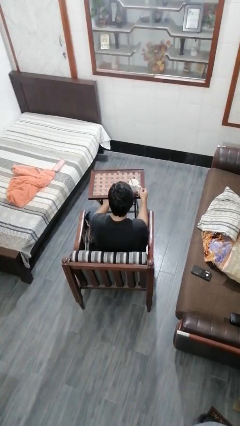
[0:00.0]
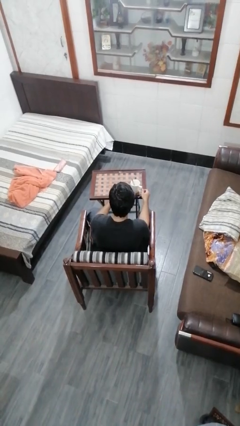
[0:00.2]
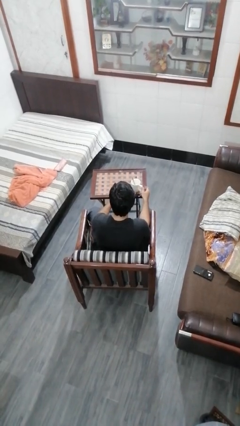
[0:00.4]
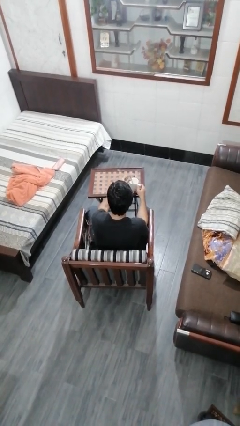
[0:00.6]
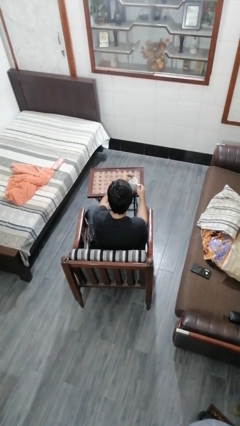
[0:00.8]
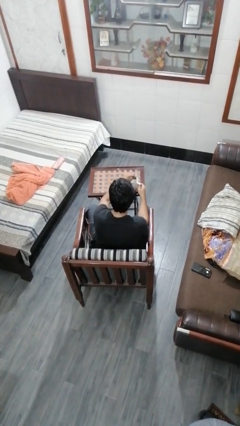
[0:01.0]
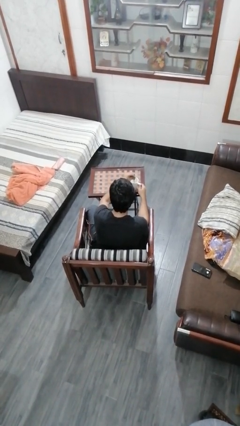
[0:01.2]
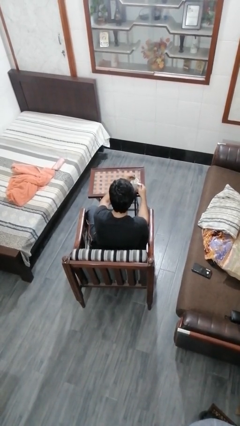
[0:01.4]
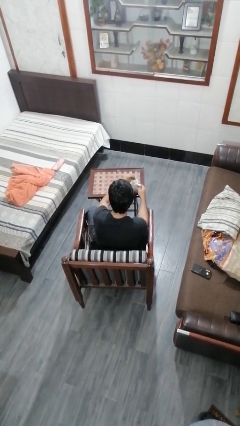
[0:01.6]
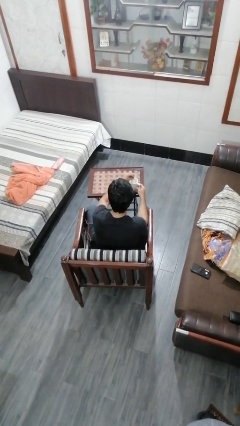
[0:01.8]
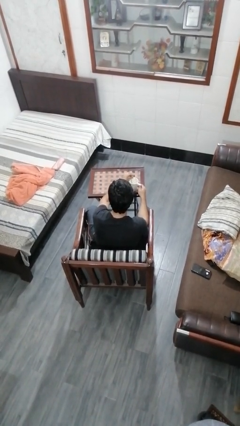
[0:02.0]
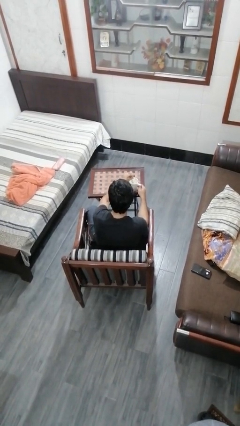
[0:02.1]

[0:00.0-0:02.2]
person stirs mug

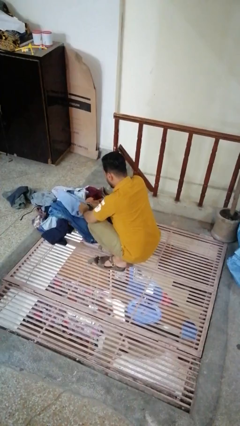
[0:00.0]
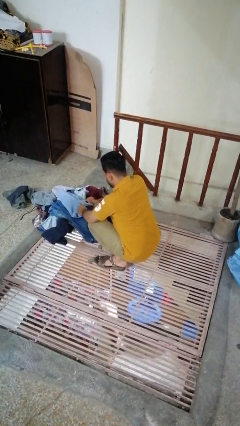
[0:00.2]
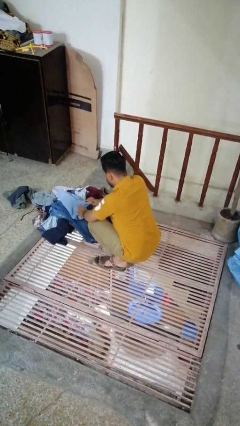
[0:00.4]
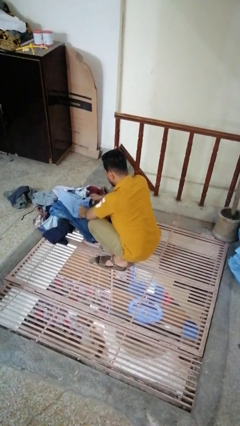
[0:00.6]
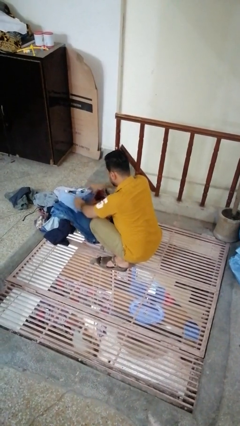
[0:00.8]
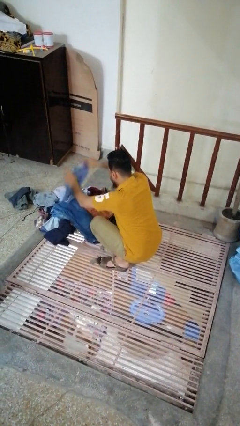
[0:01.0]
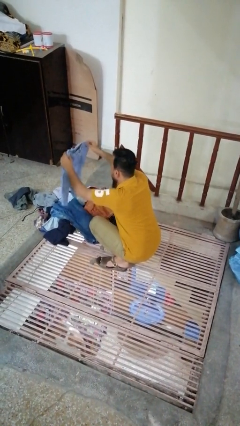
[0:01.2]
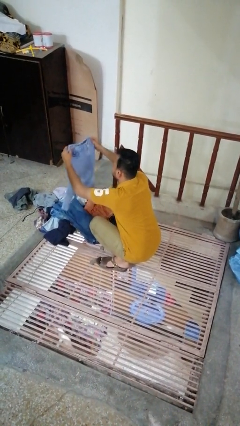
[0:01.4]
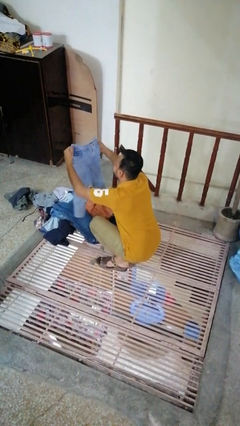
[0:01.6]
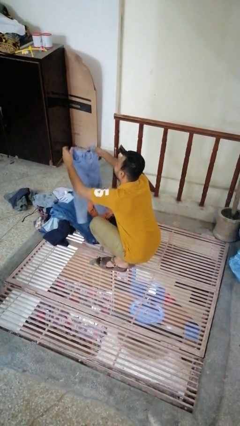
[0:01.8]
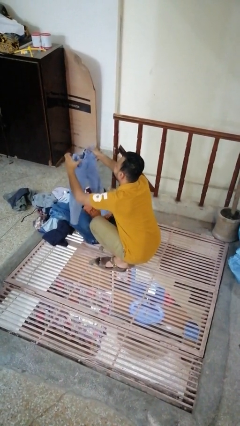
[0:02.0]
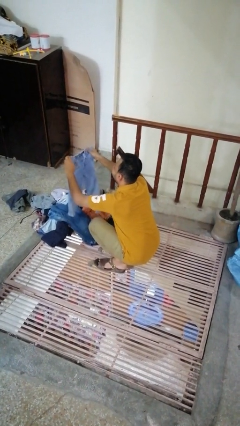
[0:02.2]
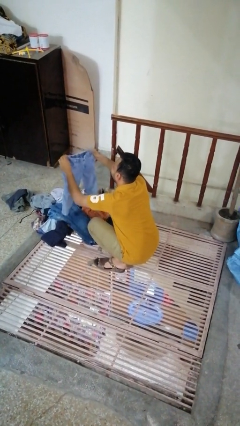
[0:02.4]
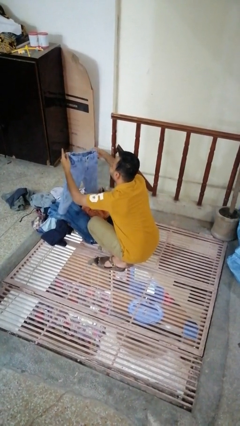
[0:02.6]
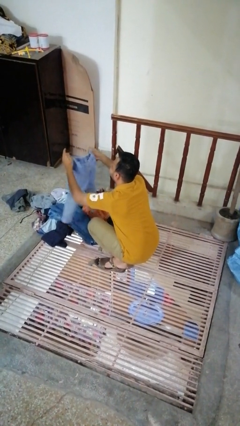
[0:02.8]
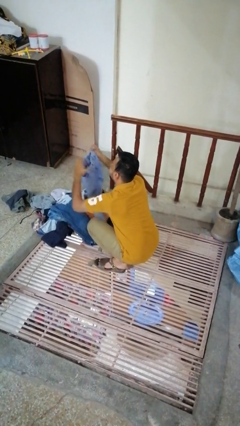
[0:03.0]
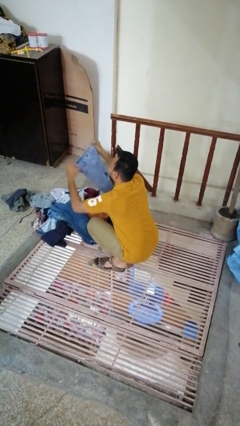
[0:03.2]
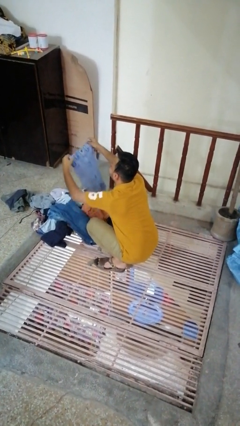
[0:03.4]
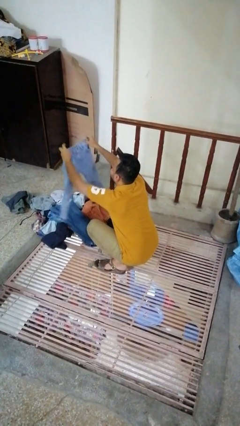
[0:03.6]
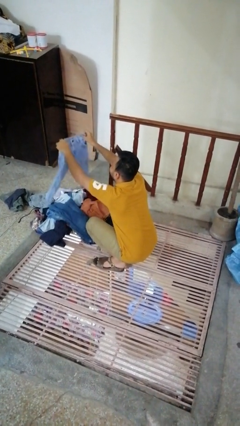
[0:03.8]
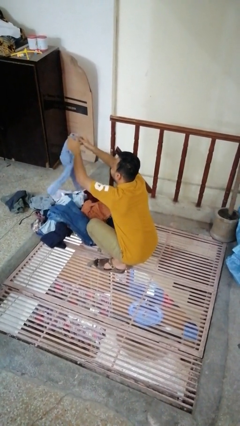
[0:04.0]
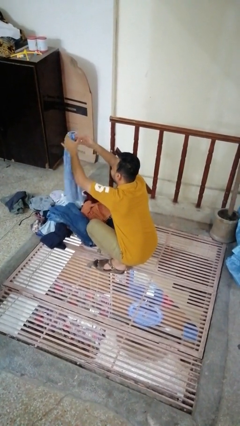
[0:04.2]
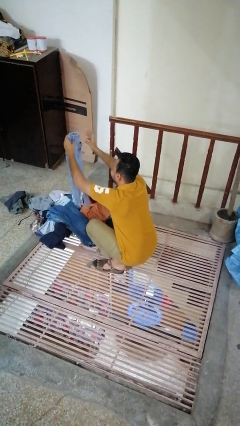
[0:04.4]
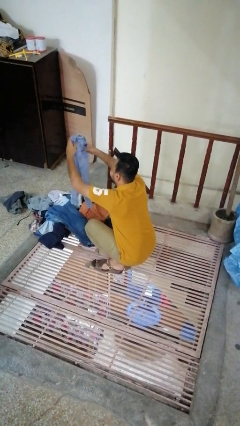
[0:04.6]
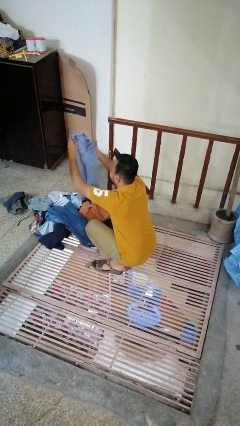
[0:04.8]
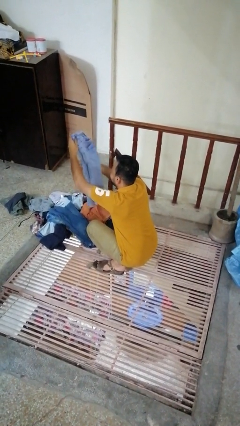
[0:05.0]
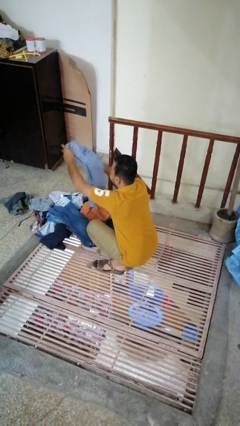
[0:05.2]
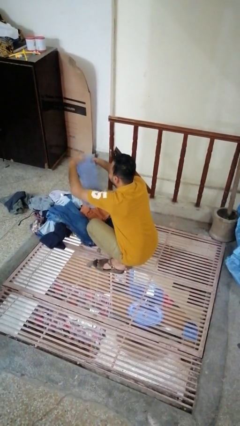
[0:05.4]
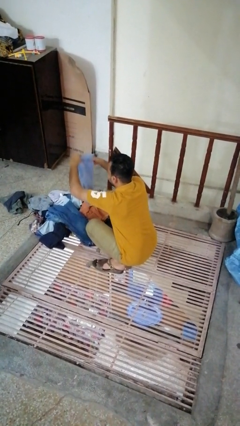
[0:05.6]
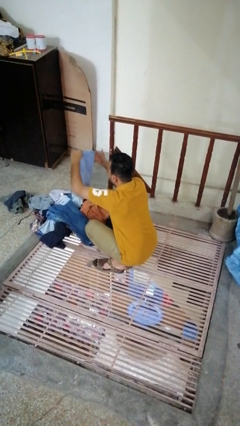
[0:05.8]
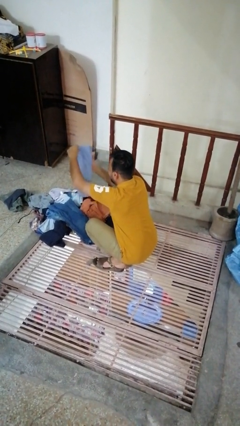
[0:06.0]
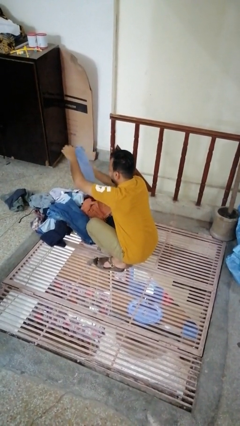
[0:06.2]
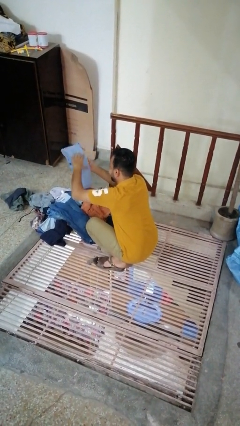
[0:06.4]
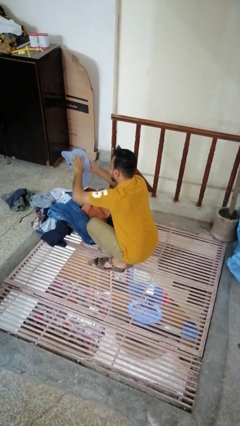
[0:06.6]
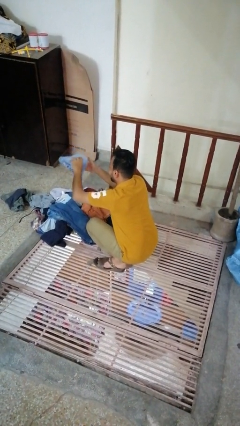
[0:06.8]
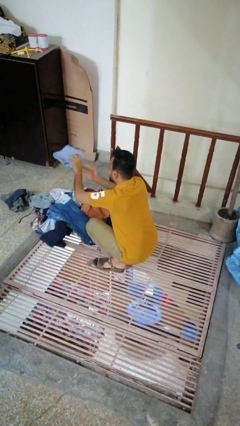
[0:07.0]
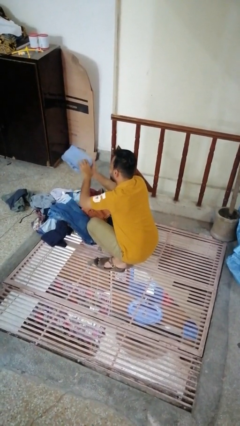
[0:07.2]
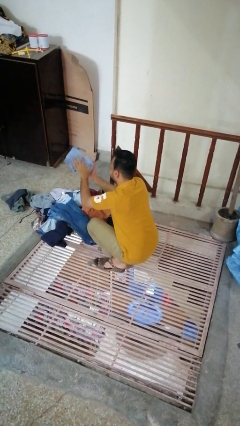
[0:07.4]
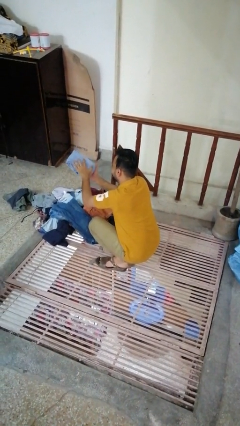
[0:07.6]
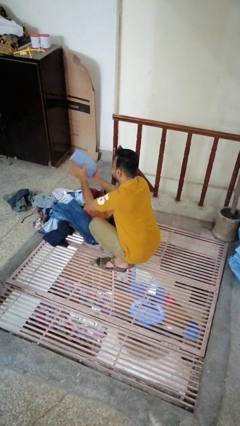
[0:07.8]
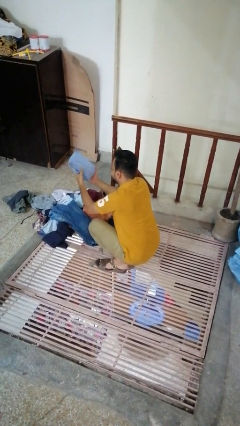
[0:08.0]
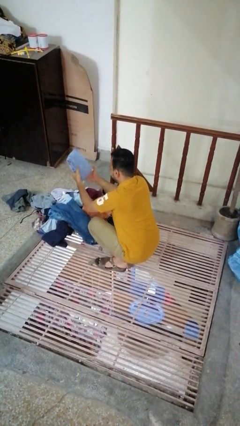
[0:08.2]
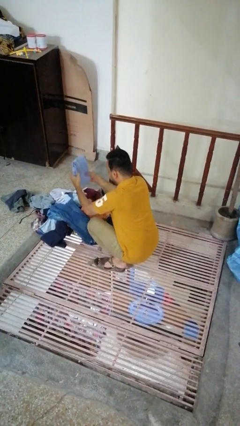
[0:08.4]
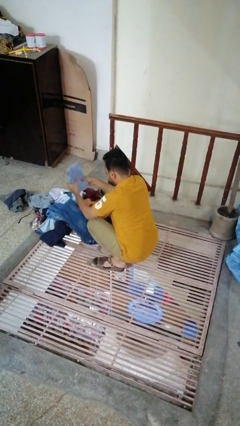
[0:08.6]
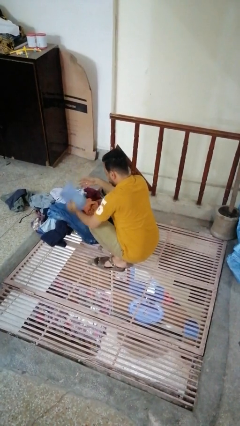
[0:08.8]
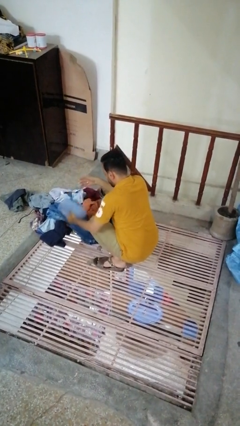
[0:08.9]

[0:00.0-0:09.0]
person folds pants

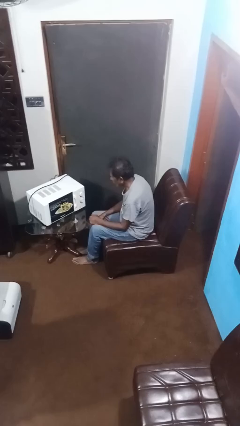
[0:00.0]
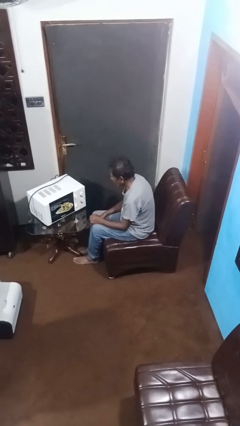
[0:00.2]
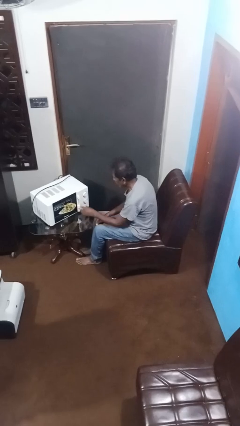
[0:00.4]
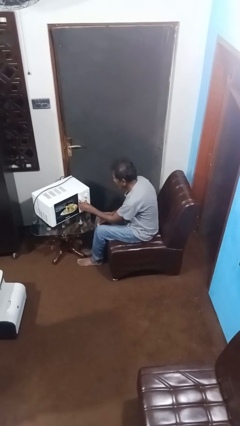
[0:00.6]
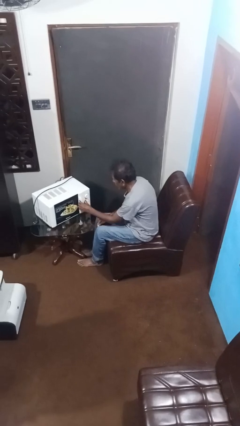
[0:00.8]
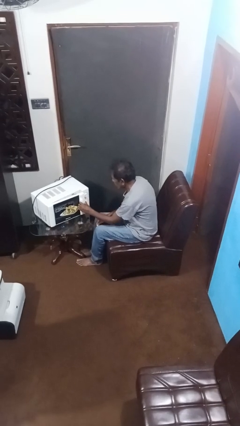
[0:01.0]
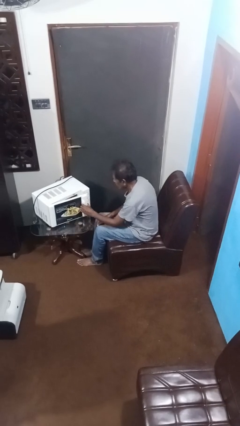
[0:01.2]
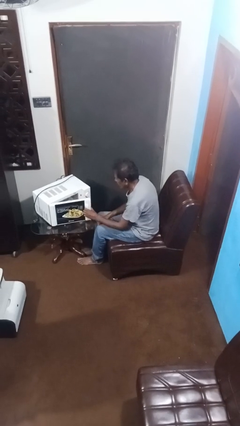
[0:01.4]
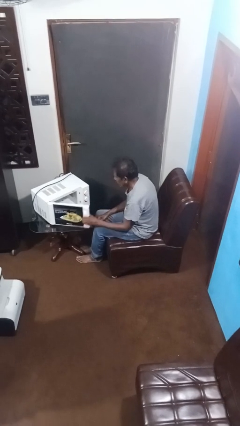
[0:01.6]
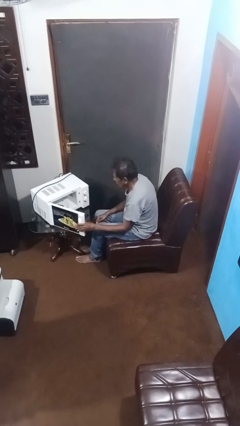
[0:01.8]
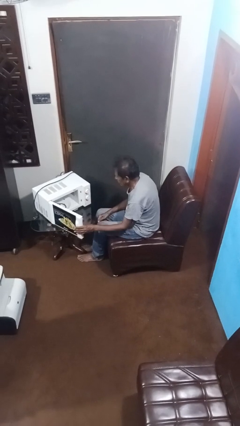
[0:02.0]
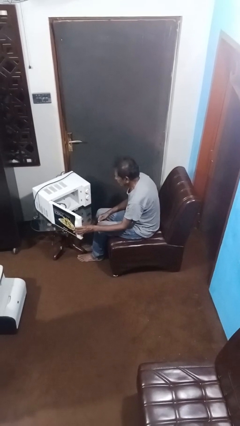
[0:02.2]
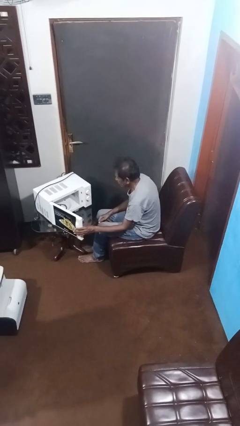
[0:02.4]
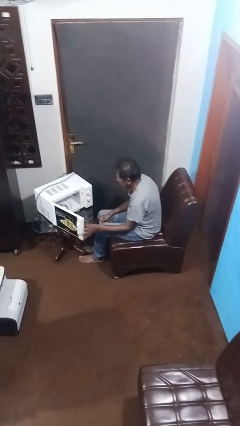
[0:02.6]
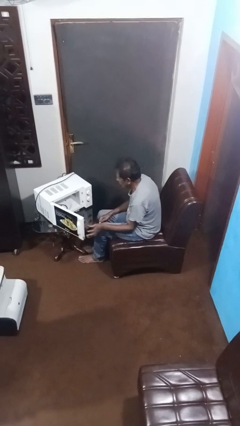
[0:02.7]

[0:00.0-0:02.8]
person opens microwave

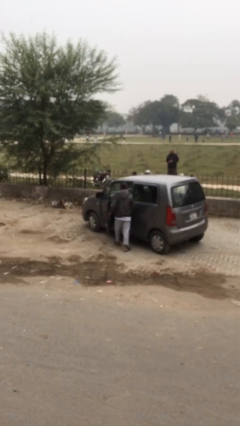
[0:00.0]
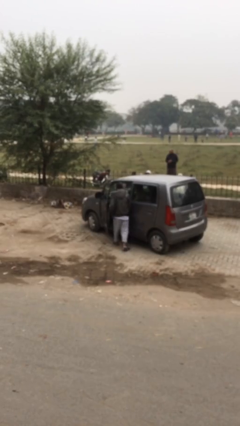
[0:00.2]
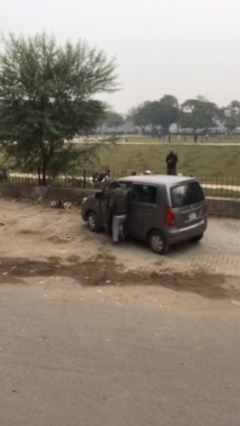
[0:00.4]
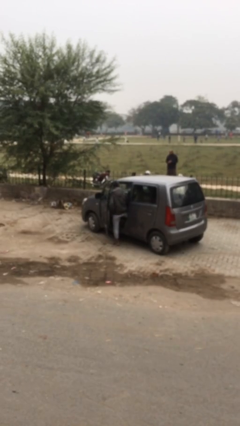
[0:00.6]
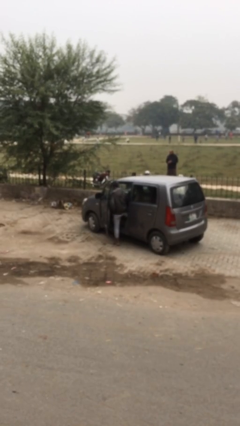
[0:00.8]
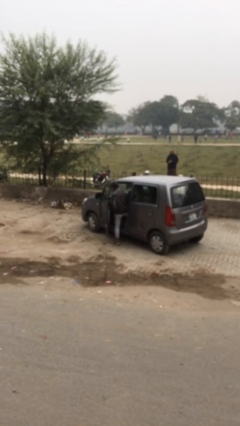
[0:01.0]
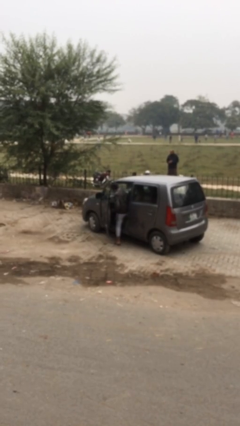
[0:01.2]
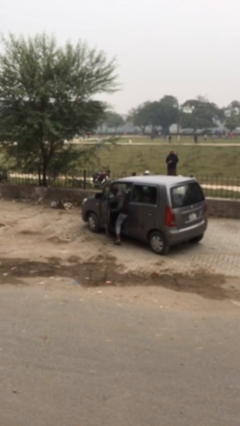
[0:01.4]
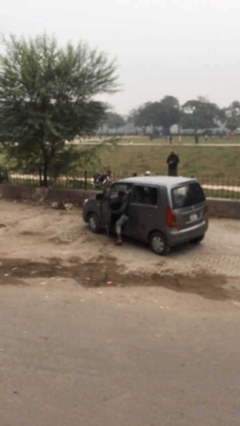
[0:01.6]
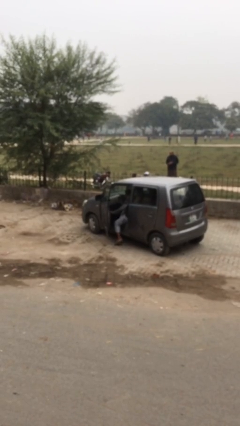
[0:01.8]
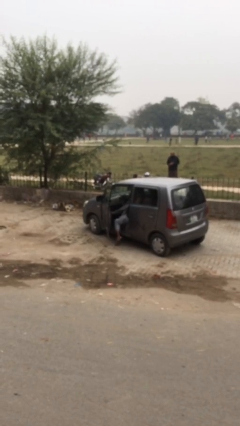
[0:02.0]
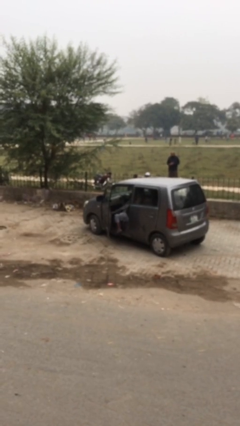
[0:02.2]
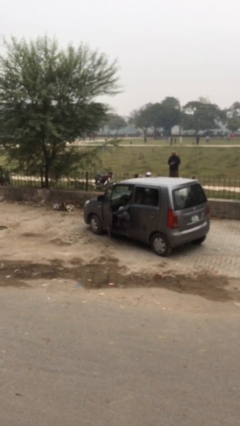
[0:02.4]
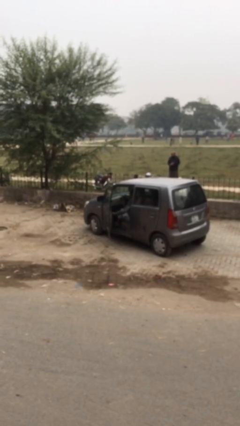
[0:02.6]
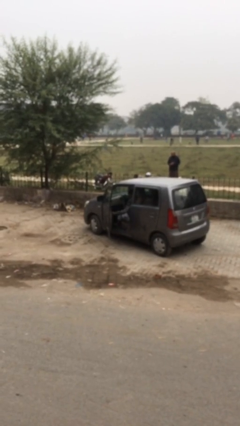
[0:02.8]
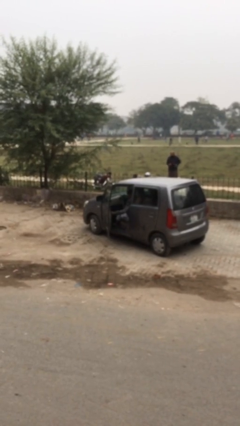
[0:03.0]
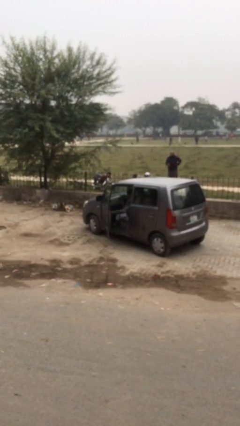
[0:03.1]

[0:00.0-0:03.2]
person enters car

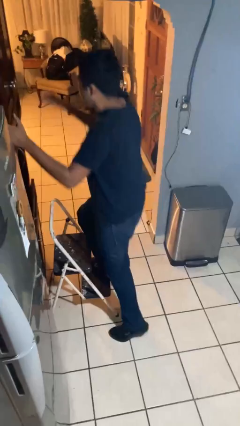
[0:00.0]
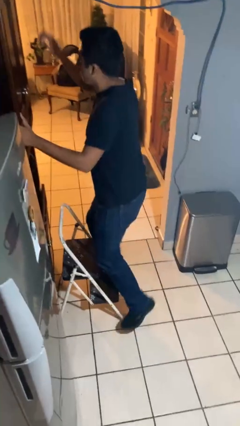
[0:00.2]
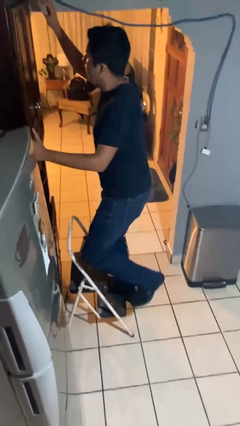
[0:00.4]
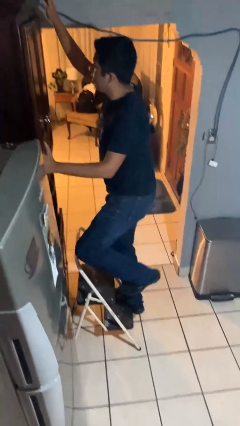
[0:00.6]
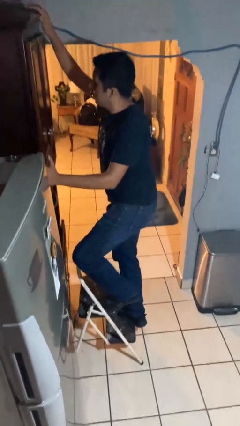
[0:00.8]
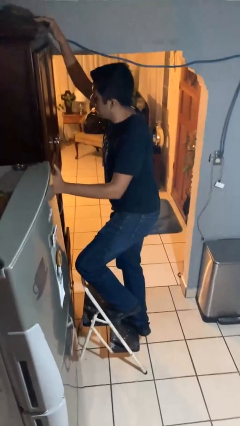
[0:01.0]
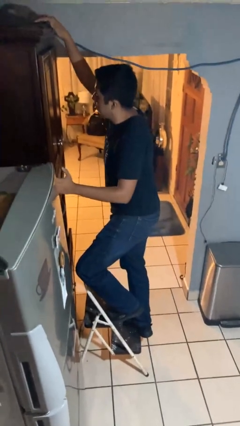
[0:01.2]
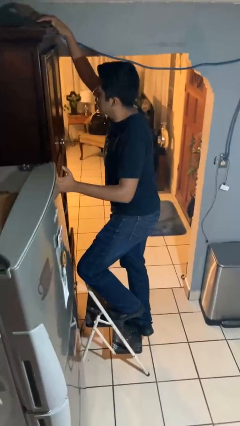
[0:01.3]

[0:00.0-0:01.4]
person climbs up ladder
